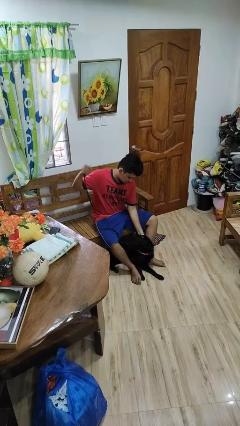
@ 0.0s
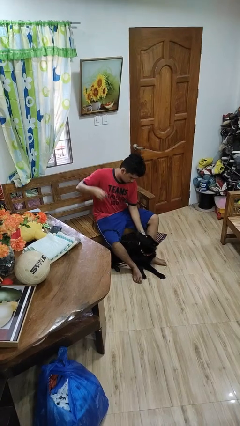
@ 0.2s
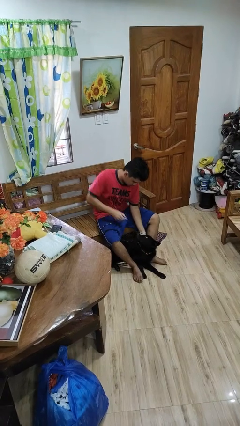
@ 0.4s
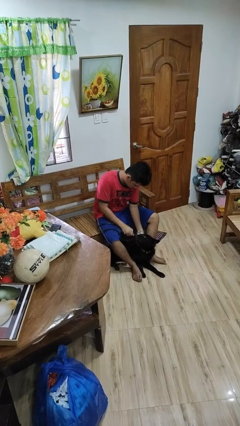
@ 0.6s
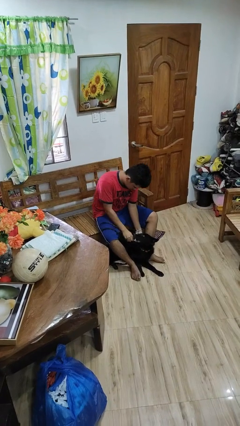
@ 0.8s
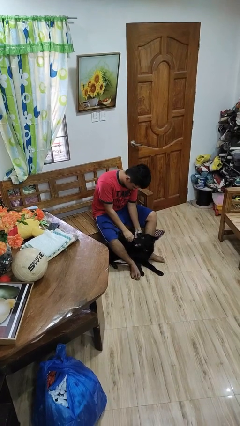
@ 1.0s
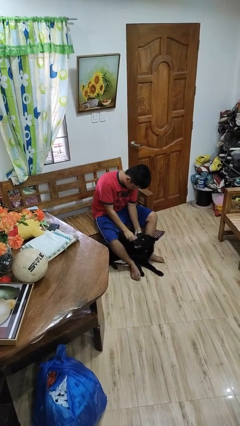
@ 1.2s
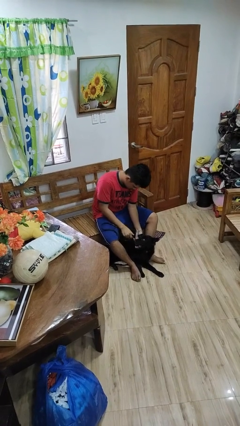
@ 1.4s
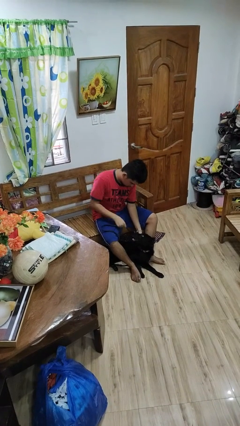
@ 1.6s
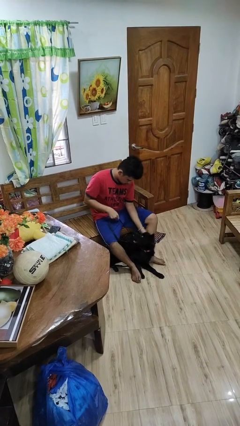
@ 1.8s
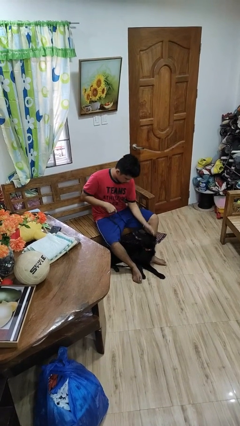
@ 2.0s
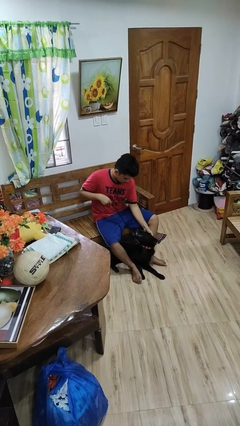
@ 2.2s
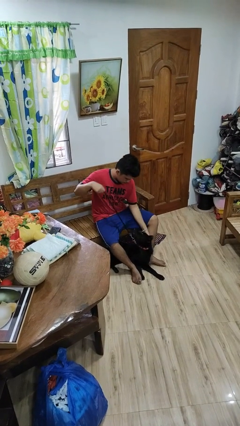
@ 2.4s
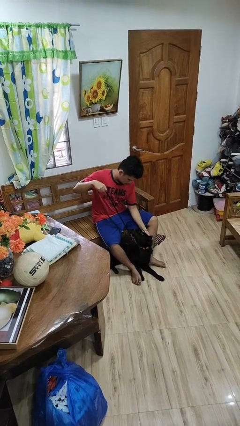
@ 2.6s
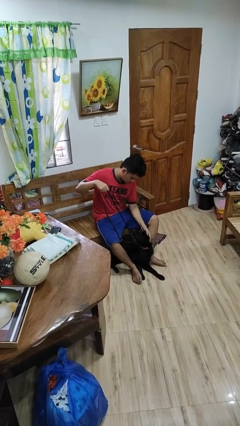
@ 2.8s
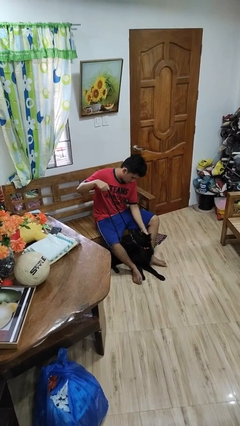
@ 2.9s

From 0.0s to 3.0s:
person attaches leash to dog

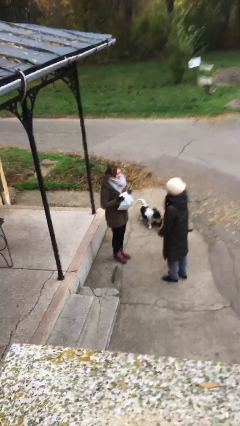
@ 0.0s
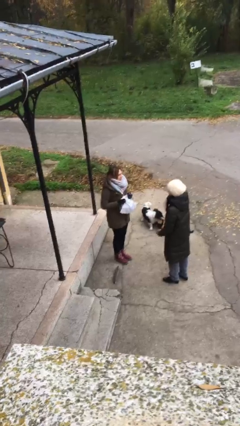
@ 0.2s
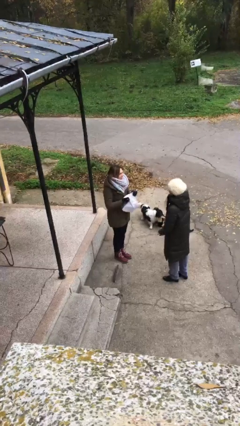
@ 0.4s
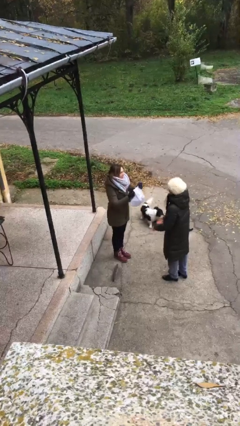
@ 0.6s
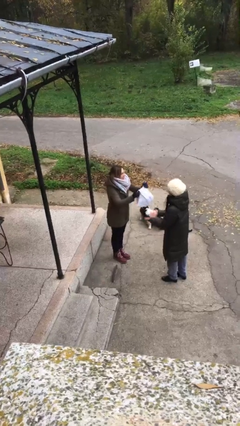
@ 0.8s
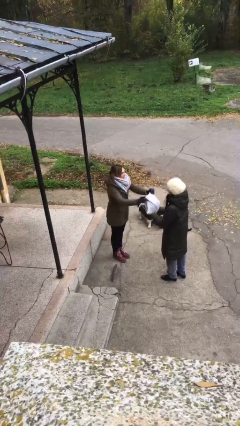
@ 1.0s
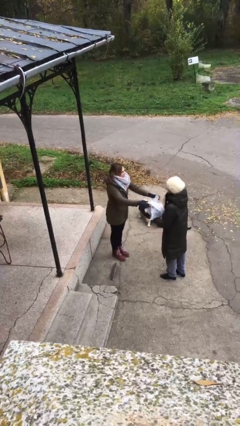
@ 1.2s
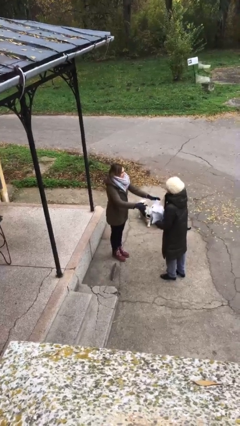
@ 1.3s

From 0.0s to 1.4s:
person transfers object to person

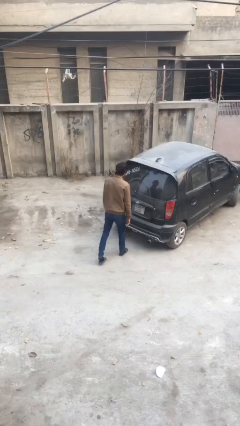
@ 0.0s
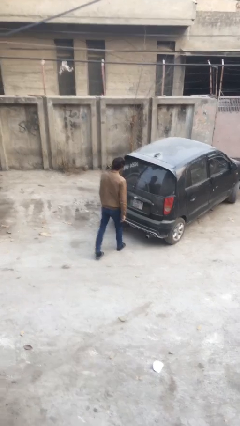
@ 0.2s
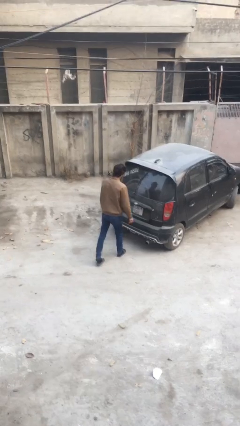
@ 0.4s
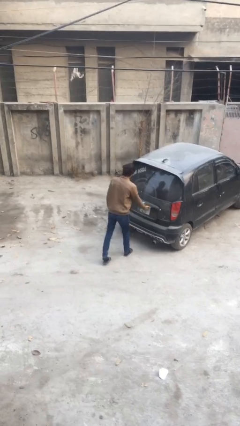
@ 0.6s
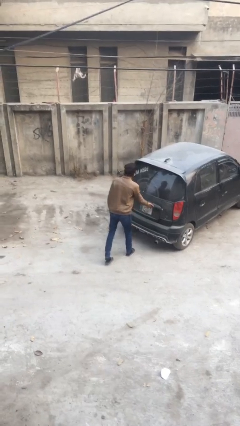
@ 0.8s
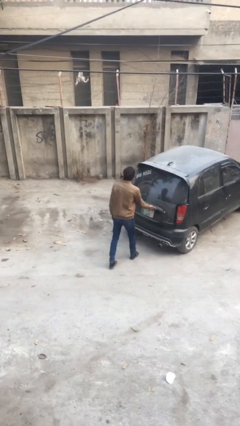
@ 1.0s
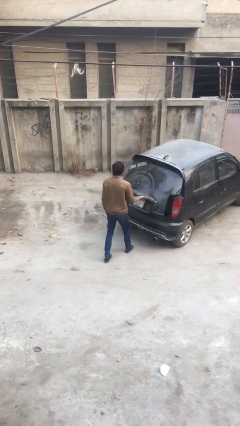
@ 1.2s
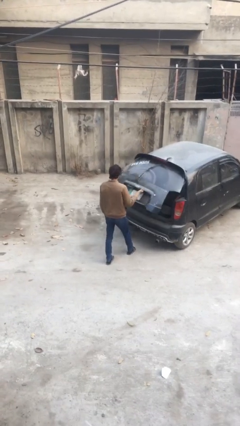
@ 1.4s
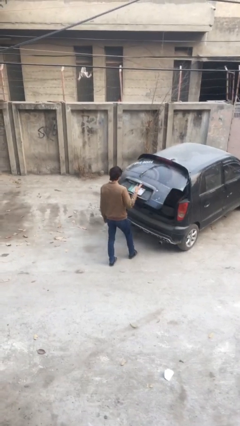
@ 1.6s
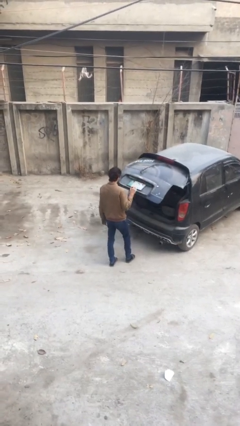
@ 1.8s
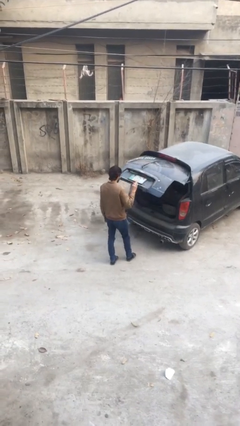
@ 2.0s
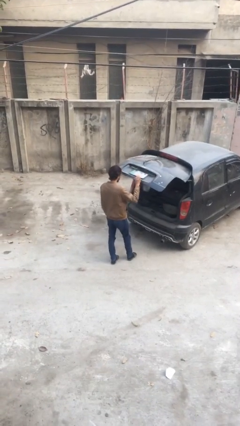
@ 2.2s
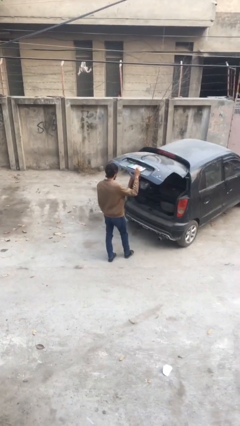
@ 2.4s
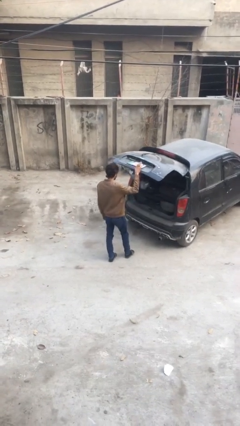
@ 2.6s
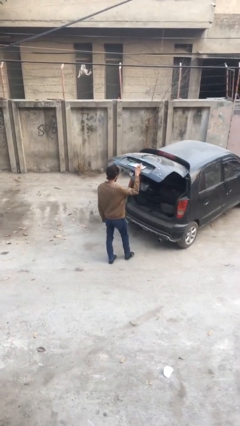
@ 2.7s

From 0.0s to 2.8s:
person opens car trunk

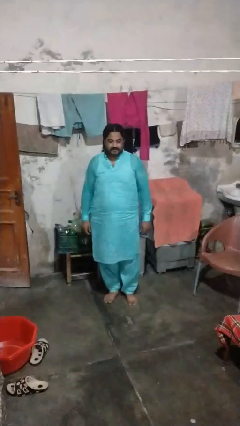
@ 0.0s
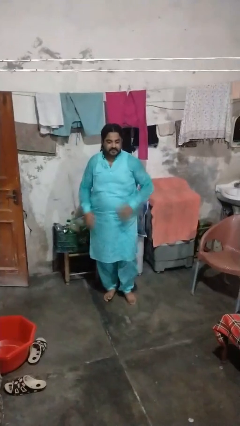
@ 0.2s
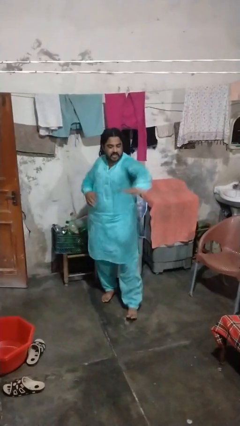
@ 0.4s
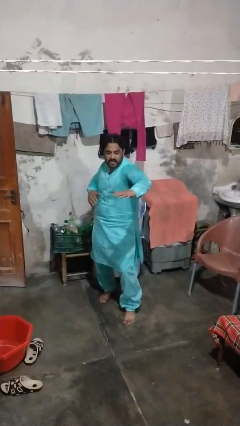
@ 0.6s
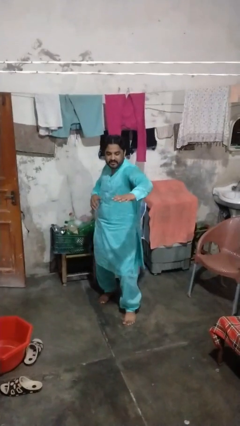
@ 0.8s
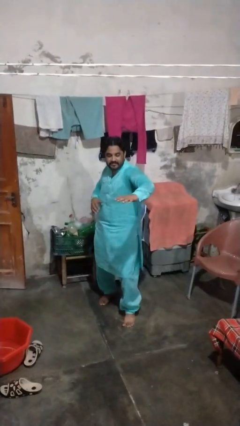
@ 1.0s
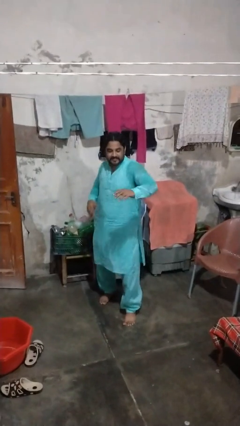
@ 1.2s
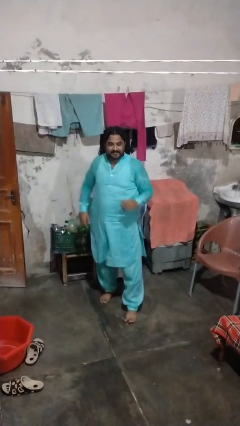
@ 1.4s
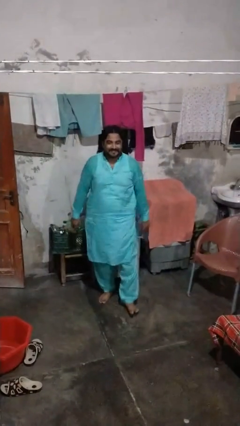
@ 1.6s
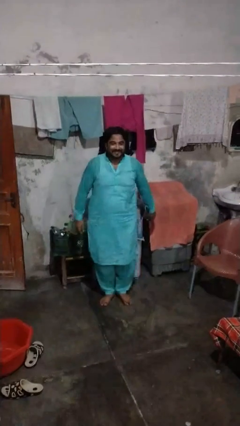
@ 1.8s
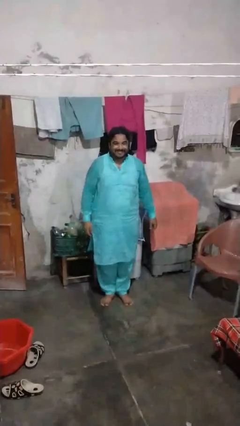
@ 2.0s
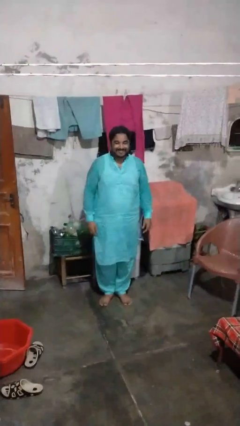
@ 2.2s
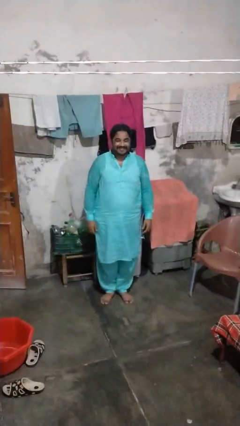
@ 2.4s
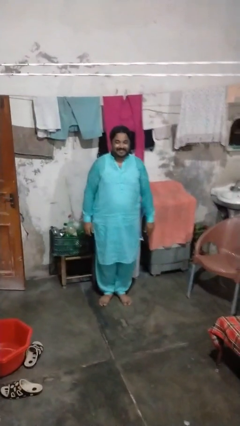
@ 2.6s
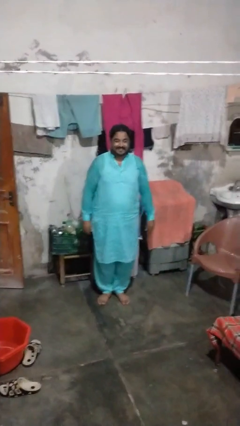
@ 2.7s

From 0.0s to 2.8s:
person karate chop

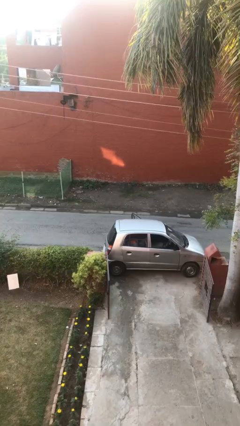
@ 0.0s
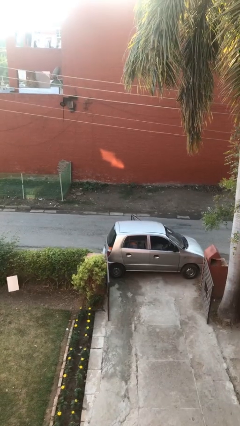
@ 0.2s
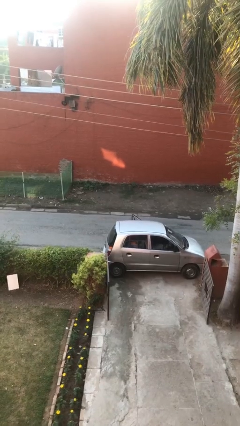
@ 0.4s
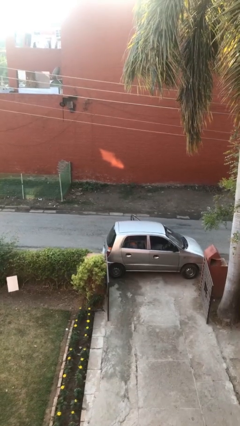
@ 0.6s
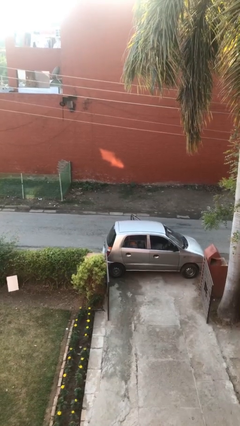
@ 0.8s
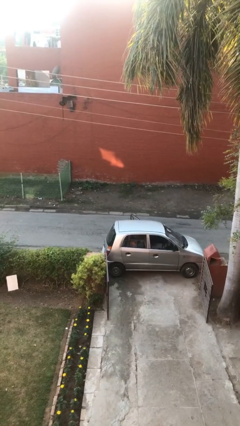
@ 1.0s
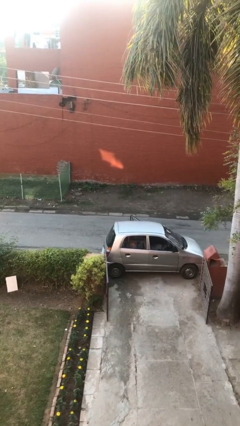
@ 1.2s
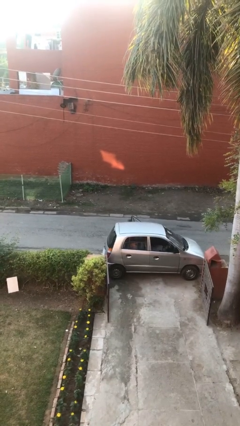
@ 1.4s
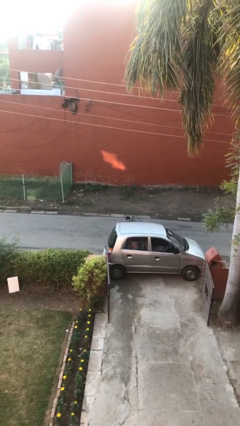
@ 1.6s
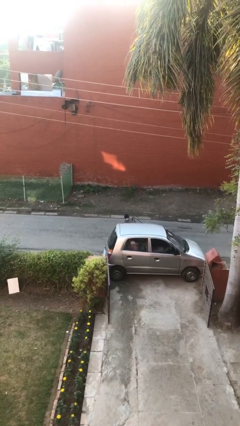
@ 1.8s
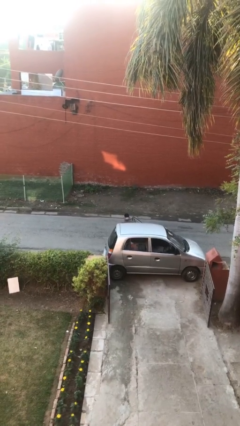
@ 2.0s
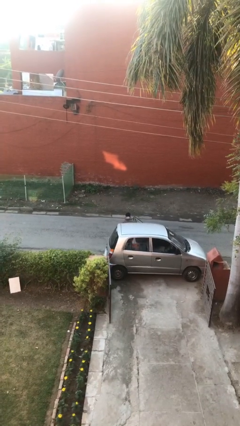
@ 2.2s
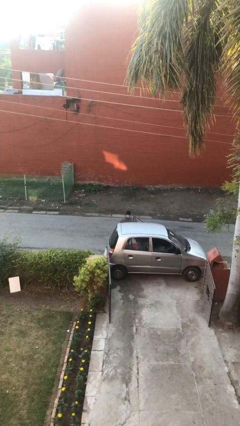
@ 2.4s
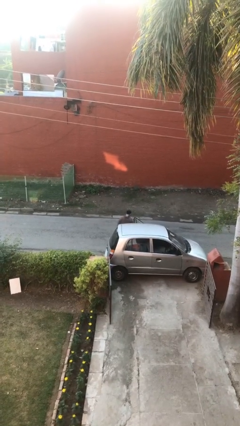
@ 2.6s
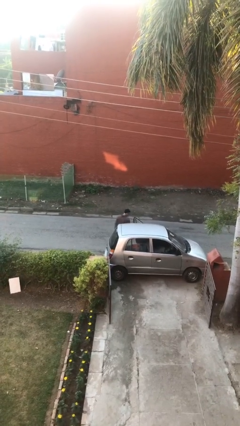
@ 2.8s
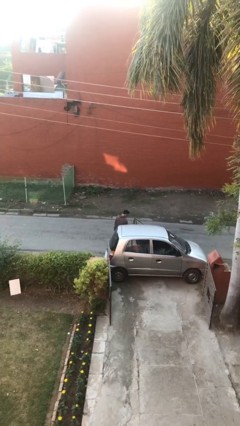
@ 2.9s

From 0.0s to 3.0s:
person exits car

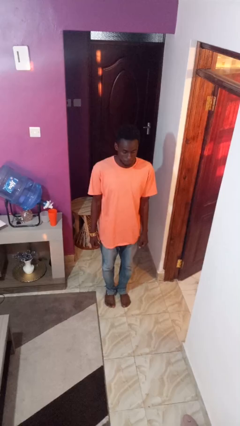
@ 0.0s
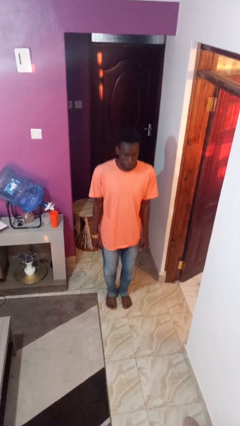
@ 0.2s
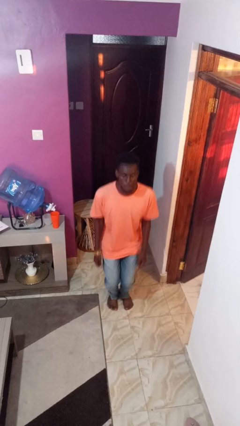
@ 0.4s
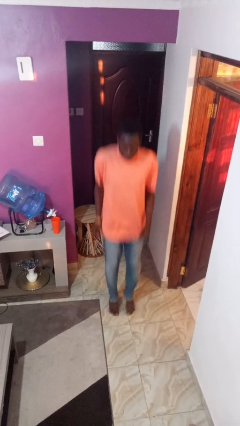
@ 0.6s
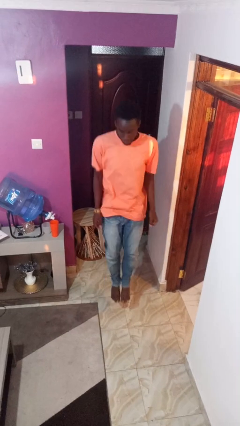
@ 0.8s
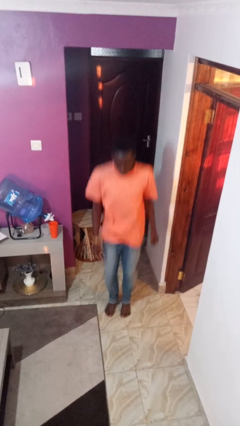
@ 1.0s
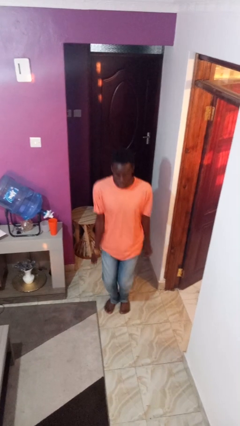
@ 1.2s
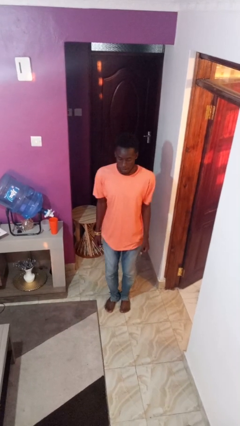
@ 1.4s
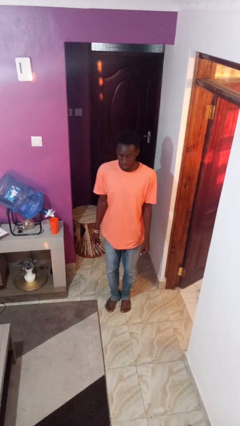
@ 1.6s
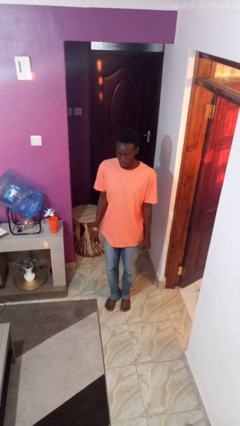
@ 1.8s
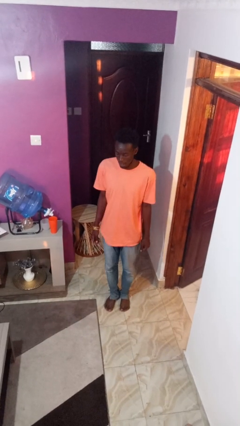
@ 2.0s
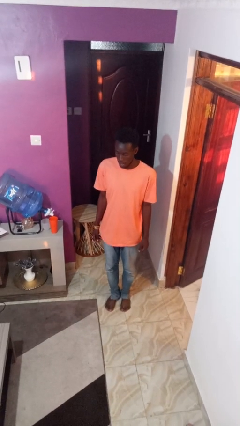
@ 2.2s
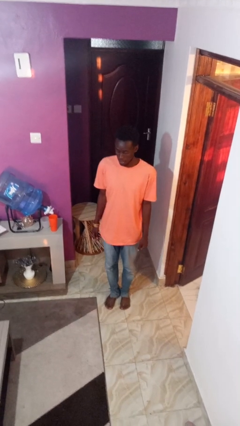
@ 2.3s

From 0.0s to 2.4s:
person jumps

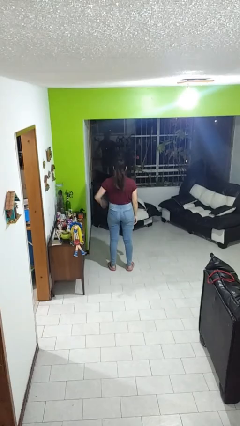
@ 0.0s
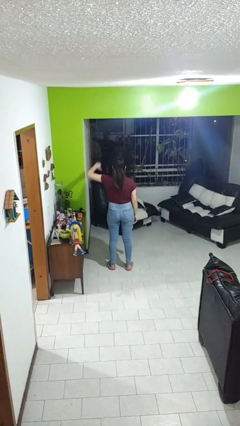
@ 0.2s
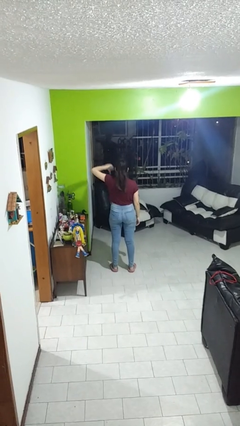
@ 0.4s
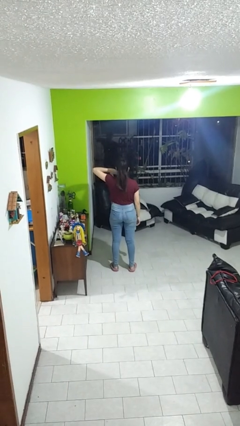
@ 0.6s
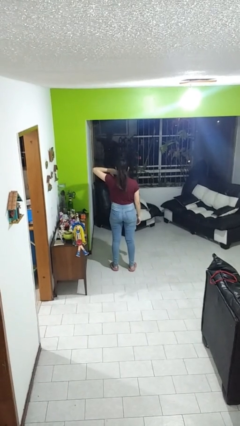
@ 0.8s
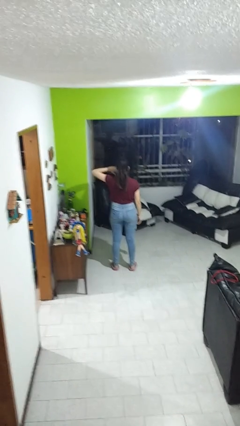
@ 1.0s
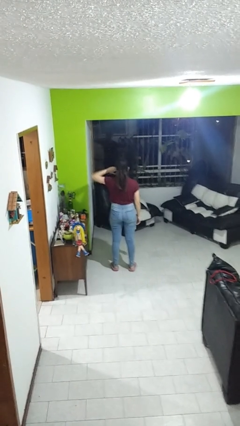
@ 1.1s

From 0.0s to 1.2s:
person gestures thumbs down
